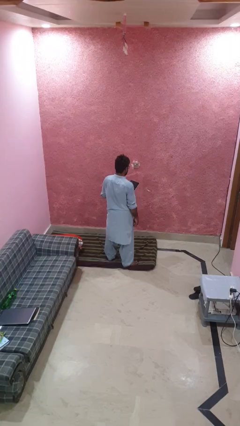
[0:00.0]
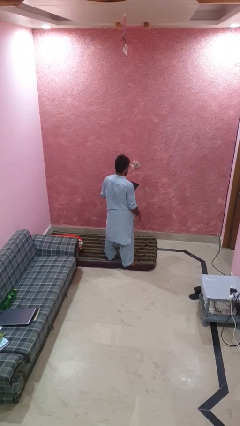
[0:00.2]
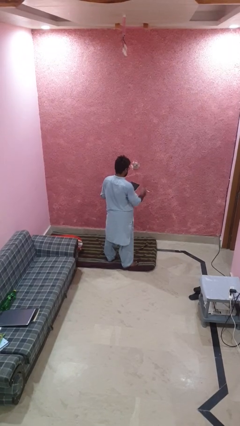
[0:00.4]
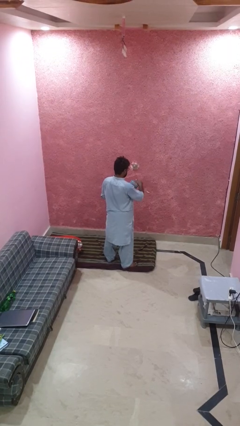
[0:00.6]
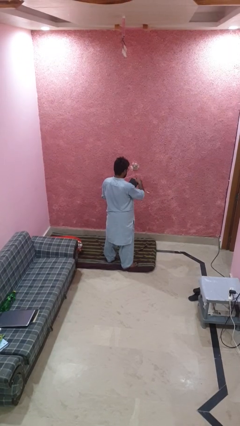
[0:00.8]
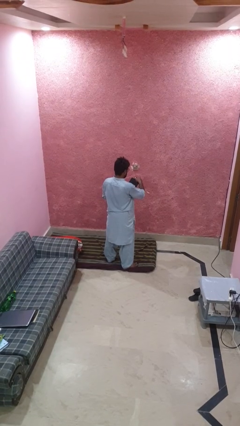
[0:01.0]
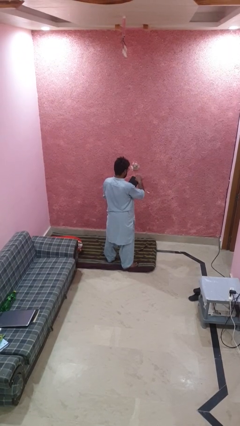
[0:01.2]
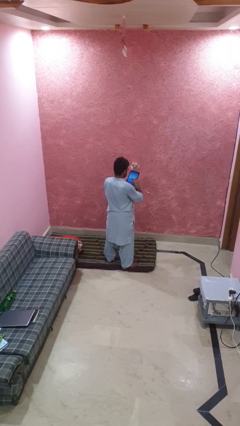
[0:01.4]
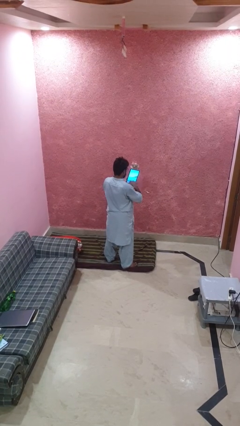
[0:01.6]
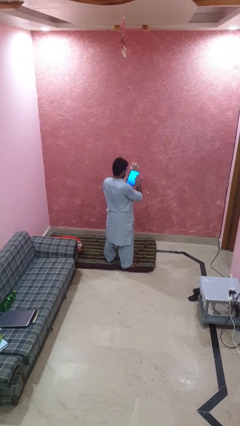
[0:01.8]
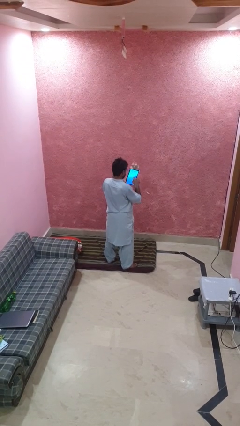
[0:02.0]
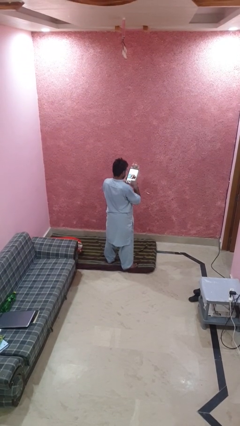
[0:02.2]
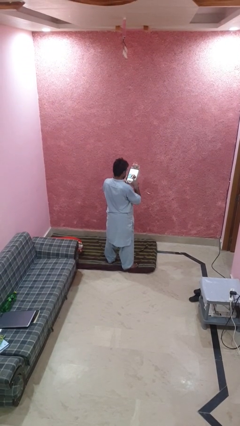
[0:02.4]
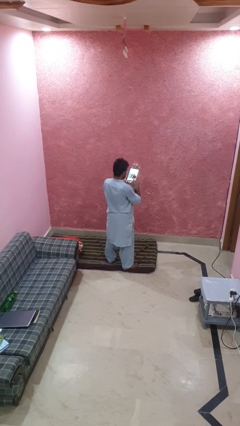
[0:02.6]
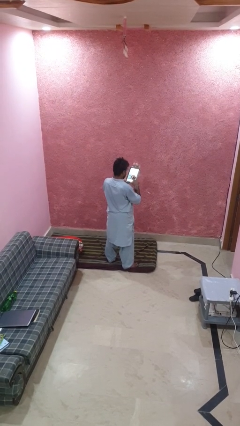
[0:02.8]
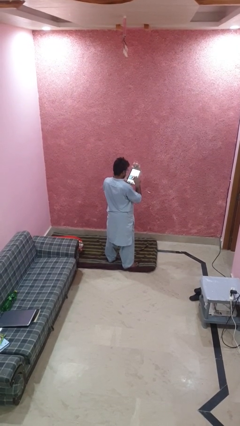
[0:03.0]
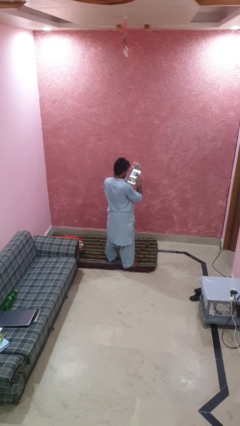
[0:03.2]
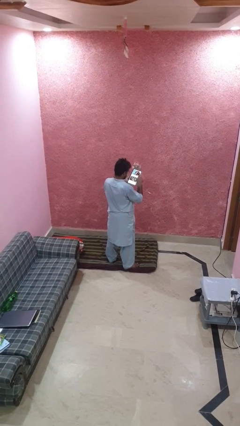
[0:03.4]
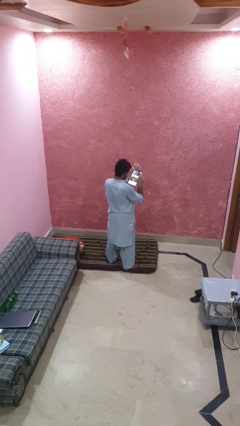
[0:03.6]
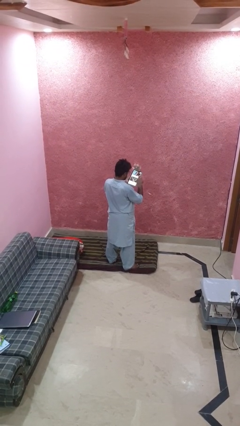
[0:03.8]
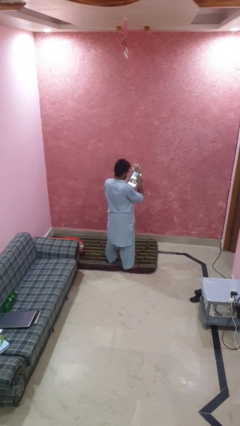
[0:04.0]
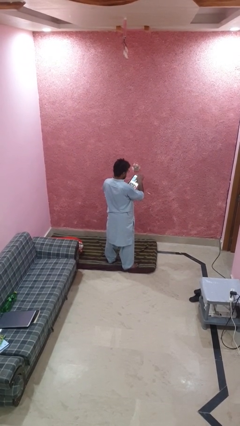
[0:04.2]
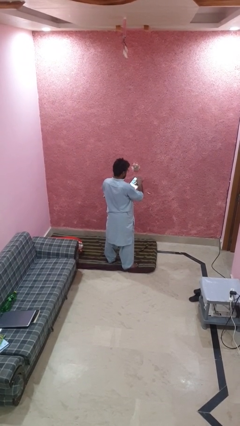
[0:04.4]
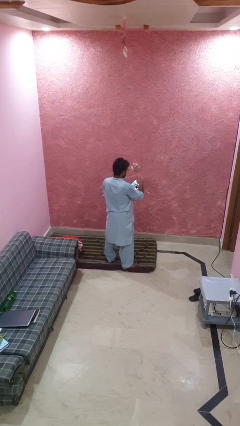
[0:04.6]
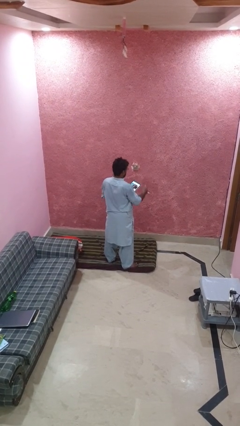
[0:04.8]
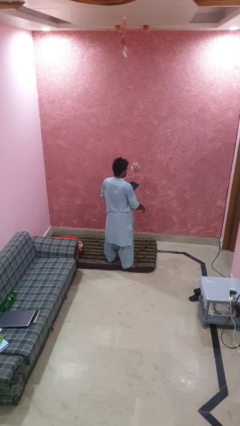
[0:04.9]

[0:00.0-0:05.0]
person interacts with tablet

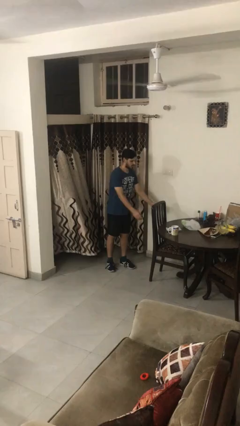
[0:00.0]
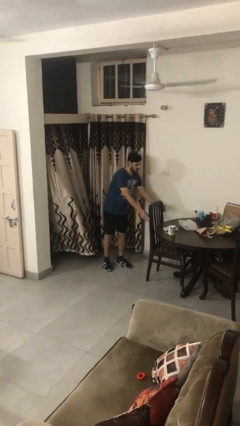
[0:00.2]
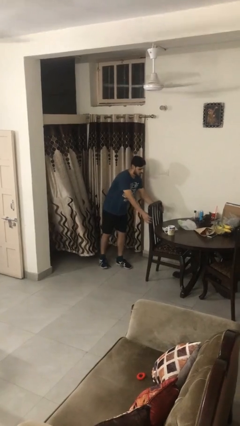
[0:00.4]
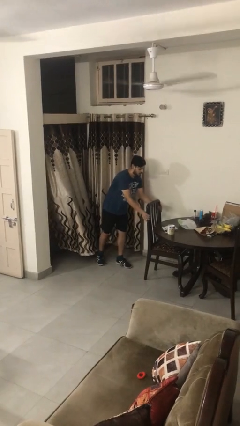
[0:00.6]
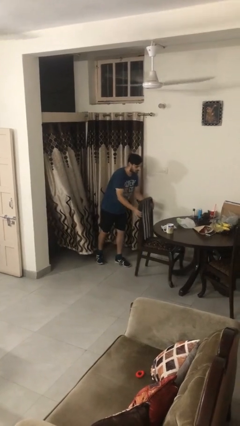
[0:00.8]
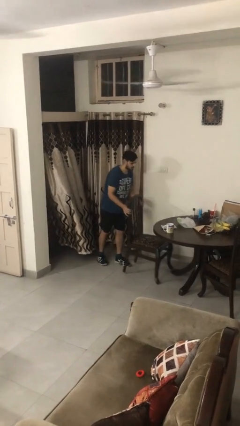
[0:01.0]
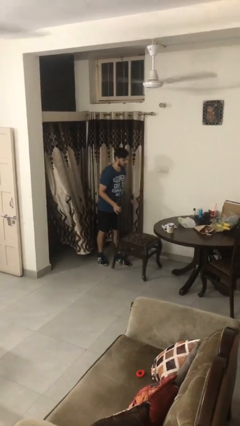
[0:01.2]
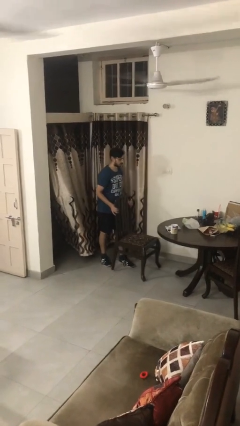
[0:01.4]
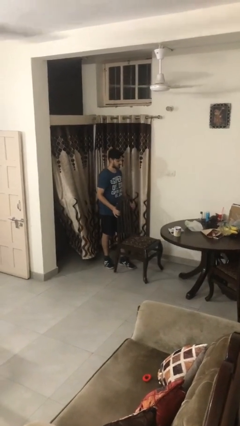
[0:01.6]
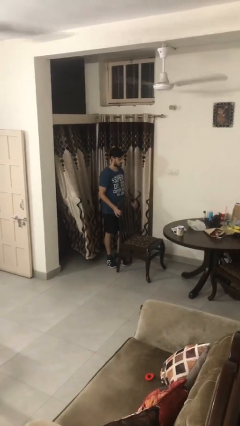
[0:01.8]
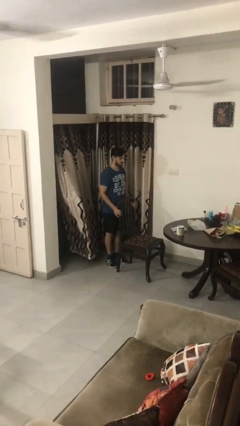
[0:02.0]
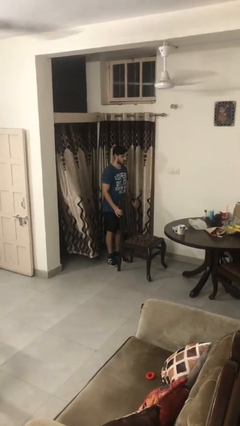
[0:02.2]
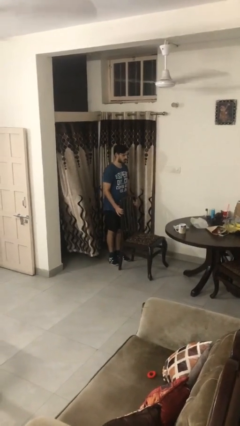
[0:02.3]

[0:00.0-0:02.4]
person pulls out chair

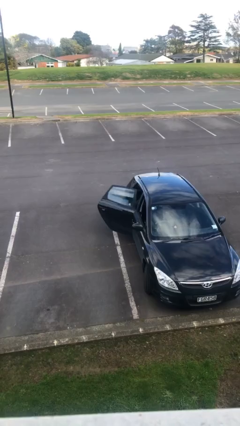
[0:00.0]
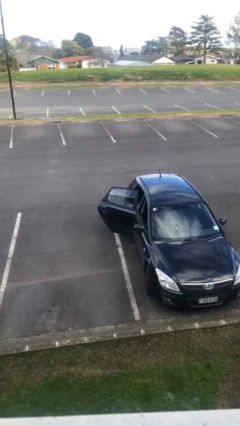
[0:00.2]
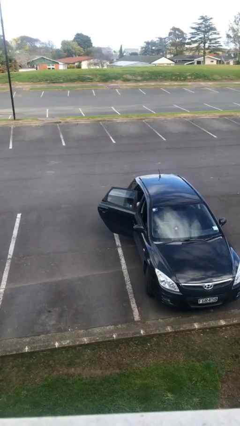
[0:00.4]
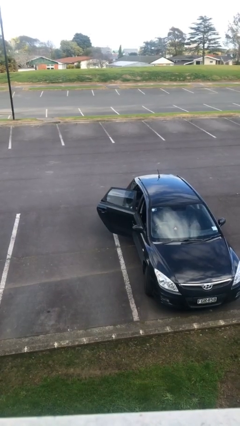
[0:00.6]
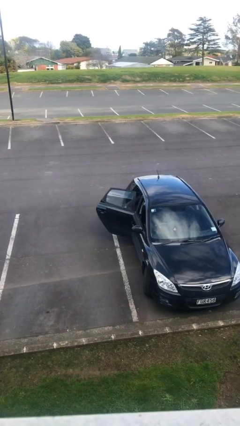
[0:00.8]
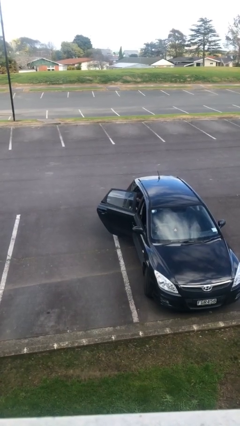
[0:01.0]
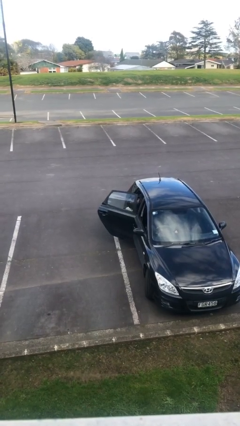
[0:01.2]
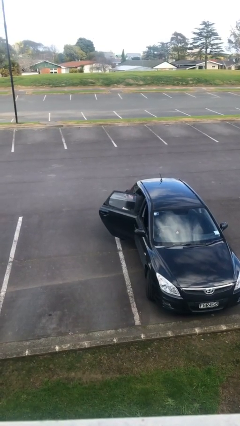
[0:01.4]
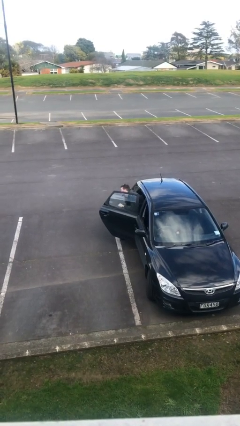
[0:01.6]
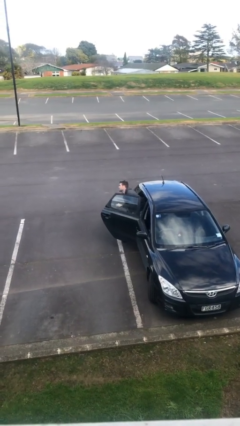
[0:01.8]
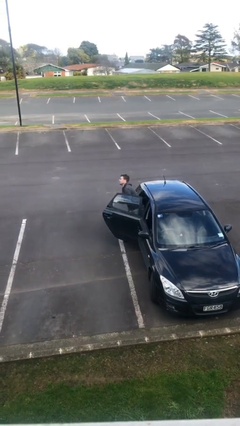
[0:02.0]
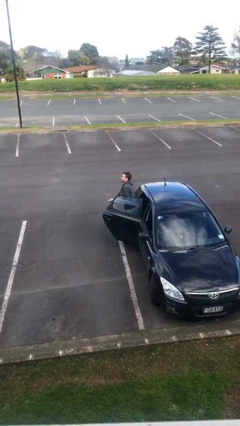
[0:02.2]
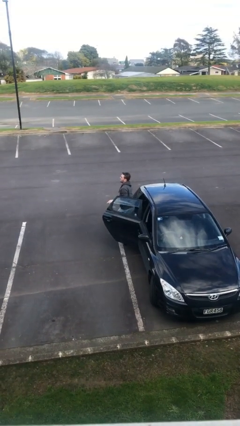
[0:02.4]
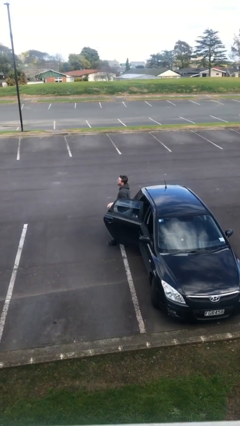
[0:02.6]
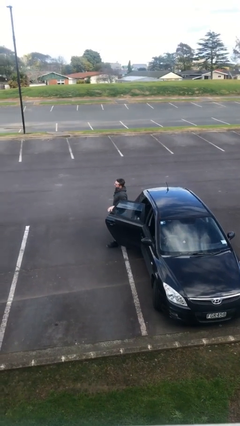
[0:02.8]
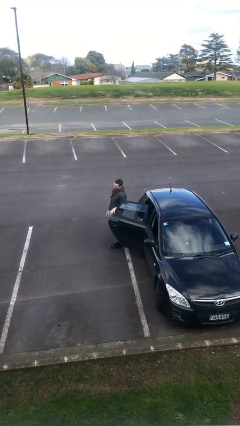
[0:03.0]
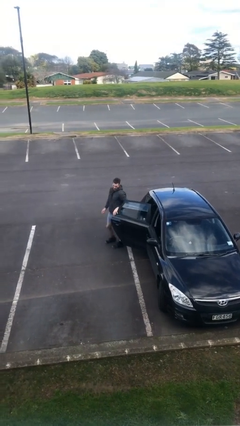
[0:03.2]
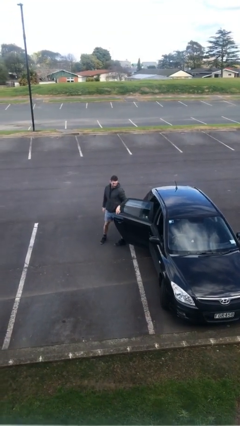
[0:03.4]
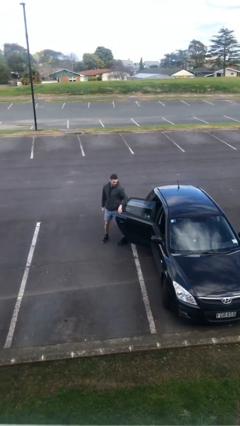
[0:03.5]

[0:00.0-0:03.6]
person exits car

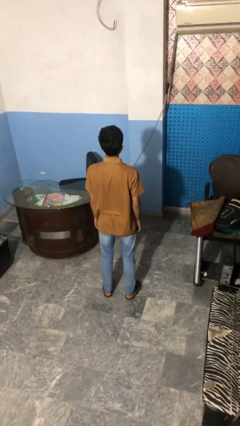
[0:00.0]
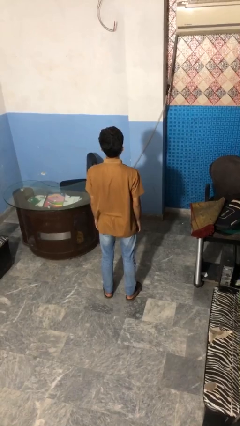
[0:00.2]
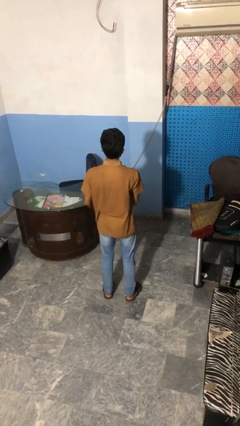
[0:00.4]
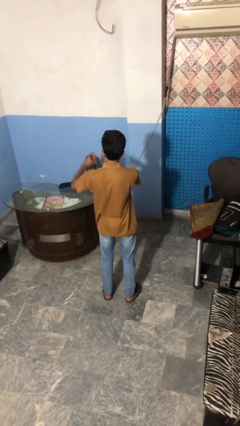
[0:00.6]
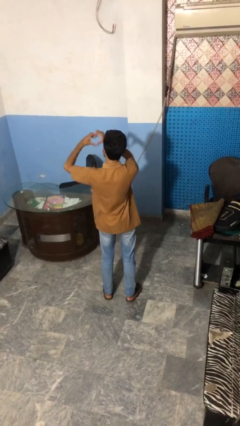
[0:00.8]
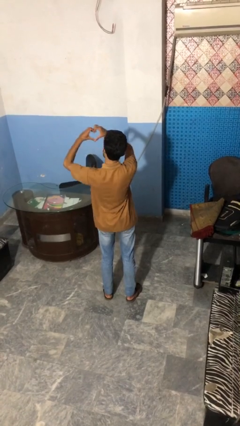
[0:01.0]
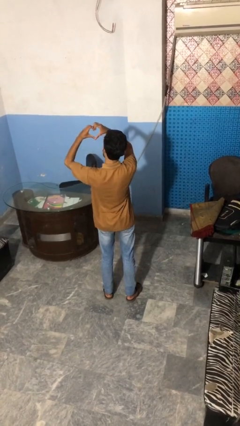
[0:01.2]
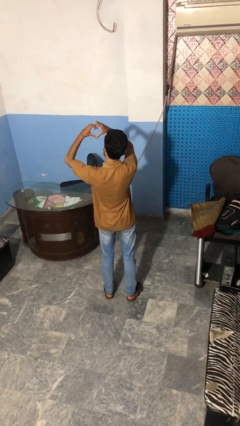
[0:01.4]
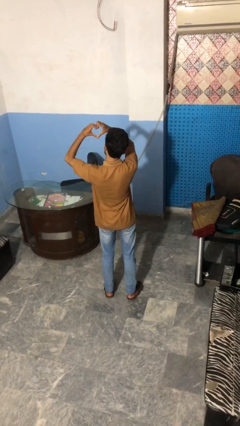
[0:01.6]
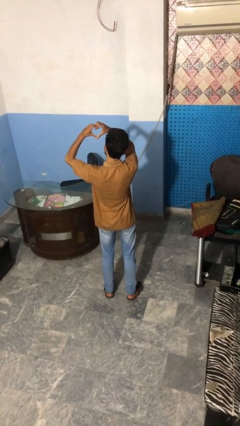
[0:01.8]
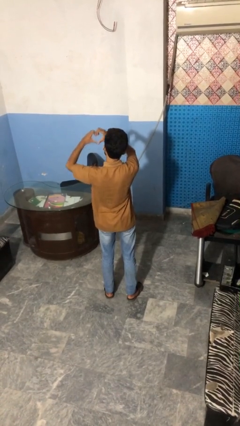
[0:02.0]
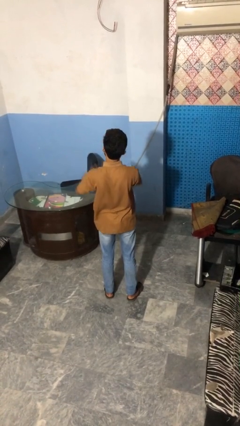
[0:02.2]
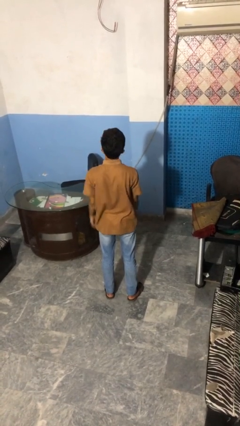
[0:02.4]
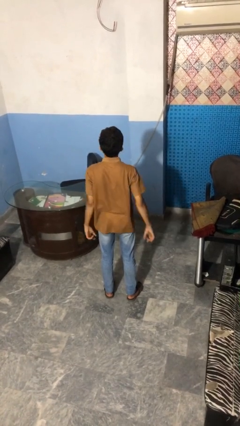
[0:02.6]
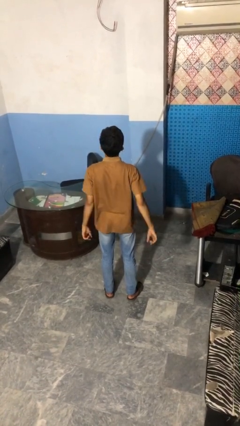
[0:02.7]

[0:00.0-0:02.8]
person gestures heart

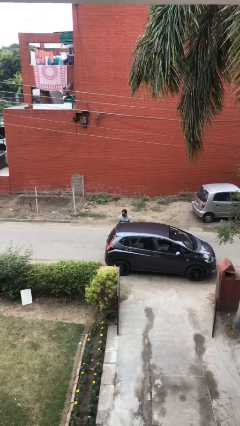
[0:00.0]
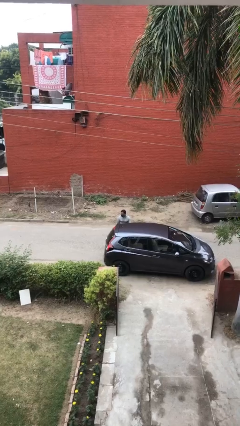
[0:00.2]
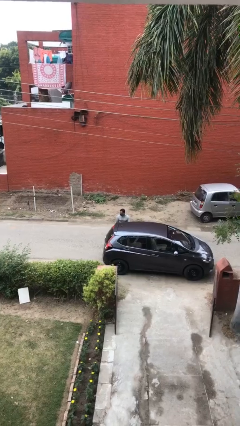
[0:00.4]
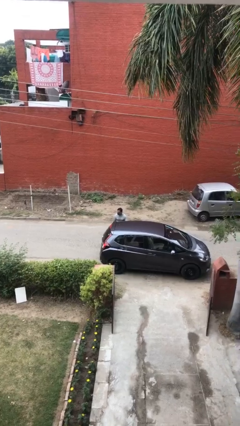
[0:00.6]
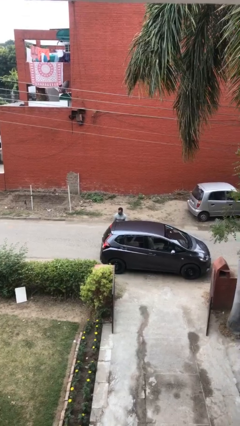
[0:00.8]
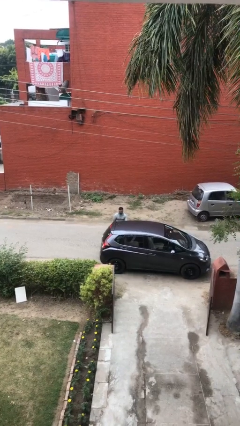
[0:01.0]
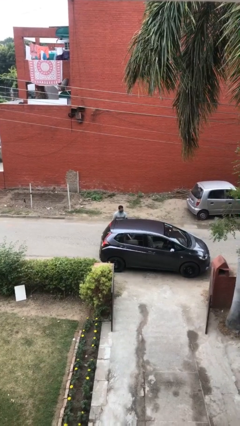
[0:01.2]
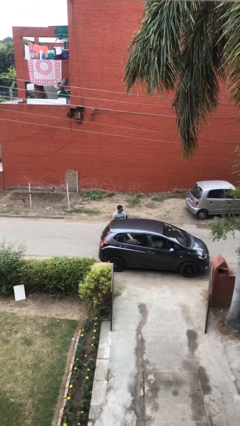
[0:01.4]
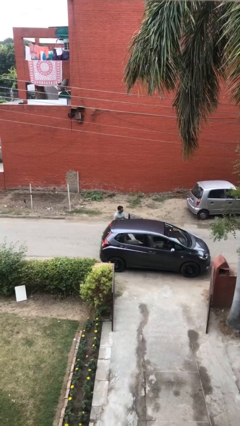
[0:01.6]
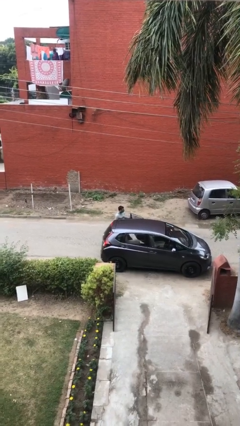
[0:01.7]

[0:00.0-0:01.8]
person opens car door

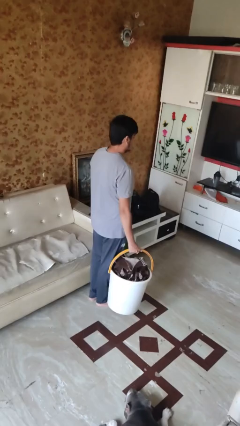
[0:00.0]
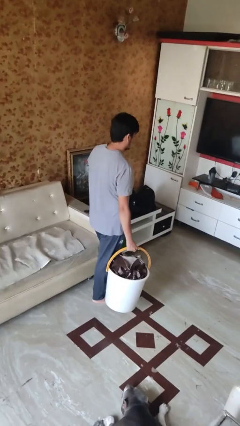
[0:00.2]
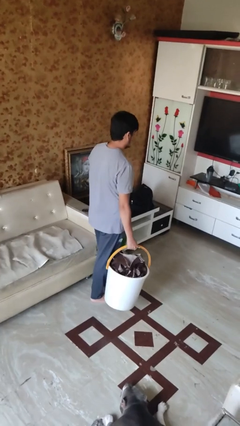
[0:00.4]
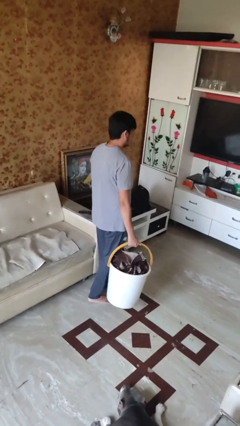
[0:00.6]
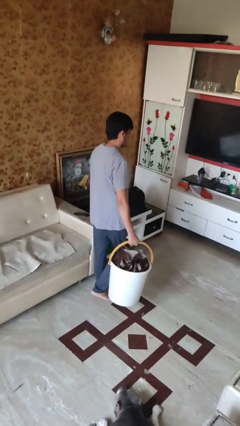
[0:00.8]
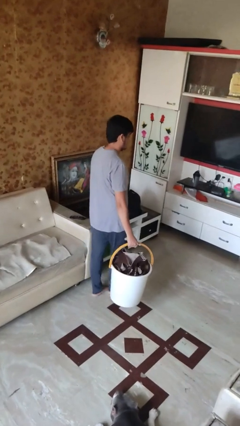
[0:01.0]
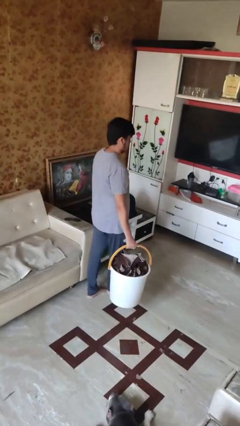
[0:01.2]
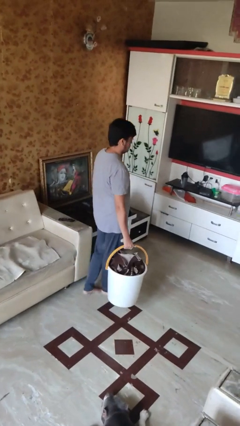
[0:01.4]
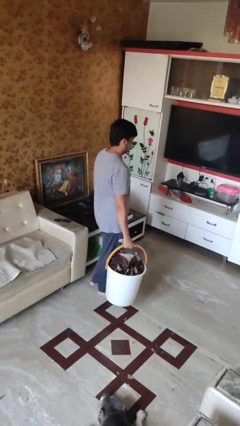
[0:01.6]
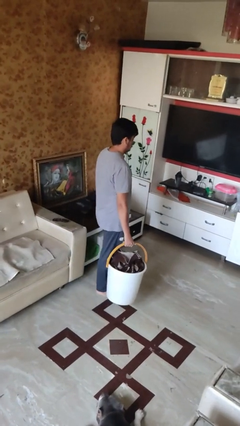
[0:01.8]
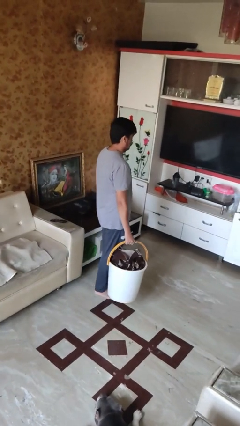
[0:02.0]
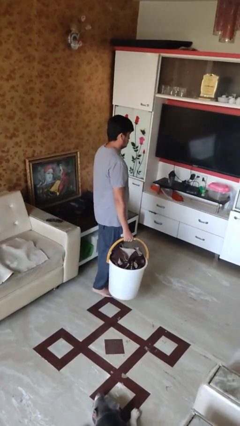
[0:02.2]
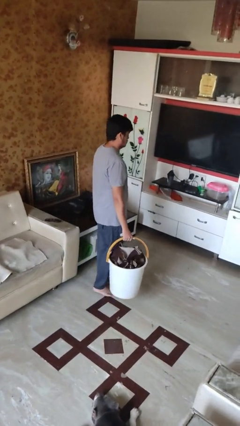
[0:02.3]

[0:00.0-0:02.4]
person carries laundry basket
